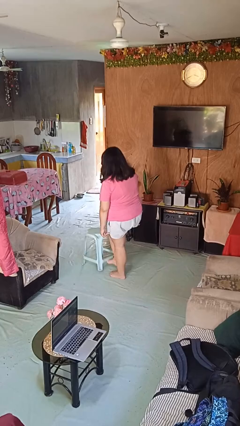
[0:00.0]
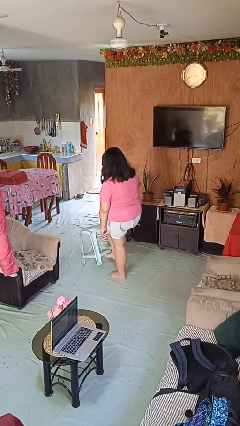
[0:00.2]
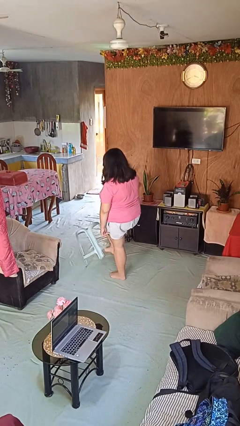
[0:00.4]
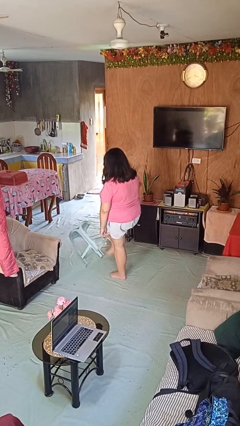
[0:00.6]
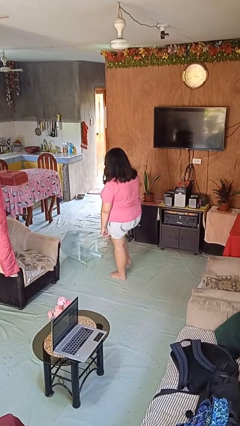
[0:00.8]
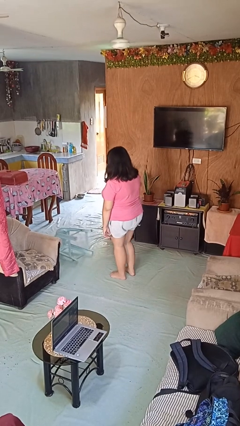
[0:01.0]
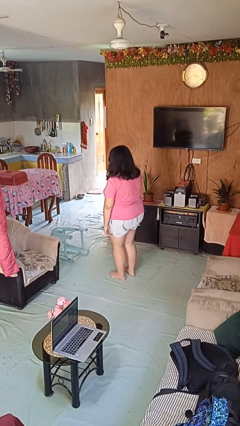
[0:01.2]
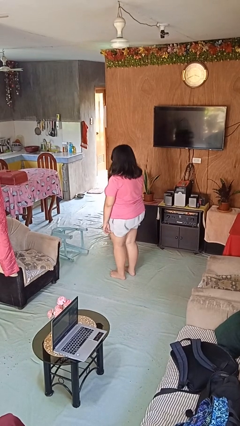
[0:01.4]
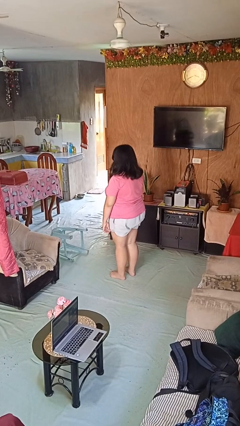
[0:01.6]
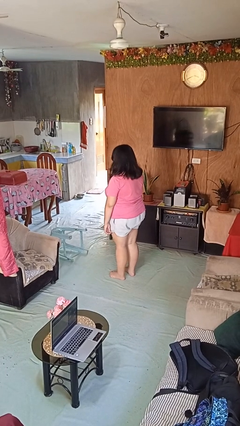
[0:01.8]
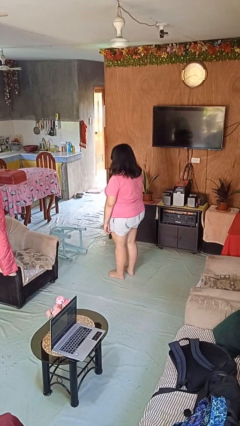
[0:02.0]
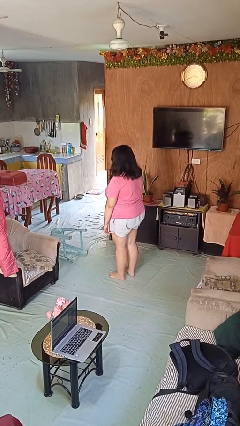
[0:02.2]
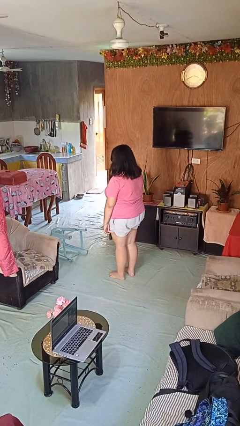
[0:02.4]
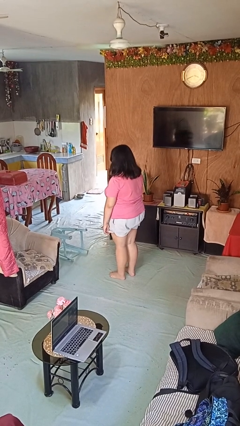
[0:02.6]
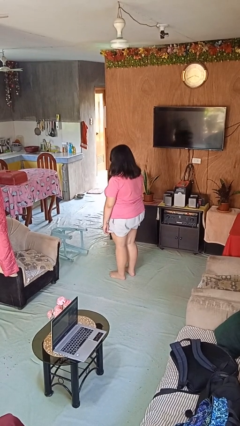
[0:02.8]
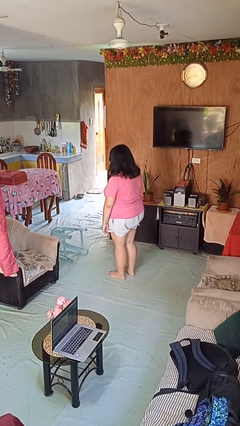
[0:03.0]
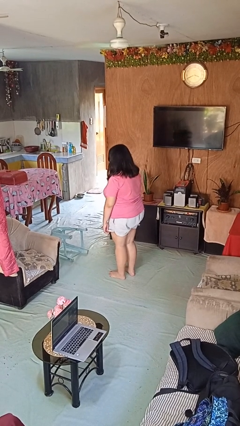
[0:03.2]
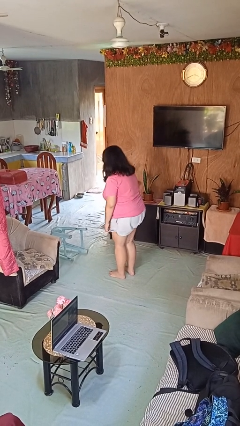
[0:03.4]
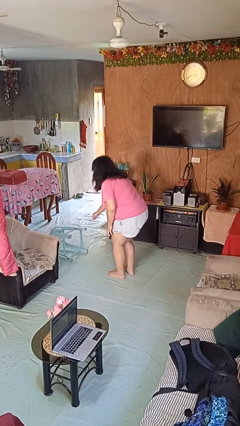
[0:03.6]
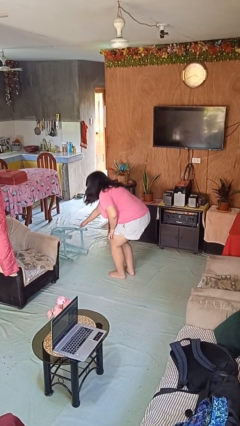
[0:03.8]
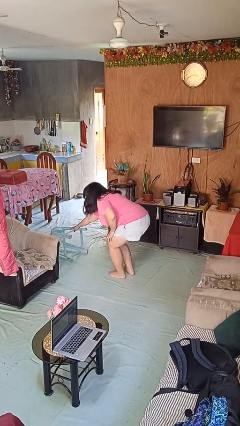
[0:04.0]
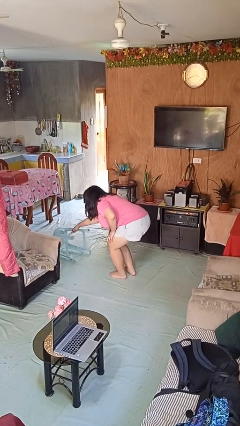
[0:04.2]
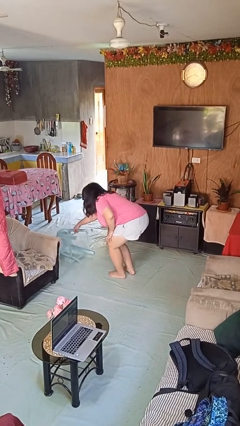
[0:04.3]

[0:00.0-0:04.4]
person knocks over furniture

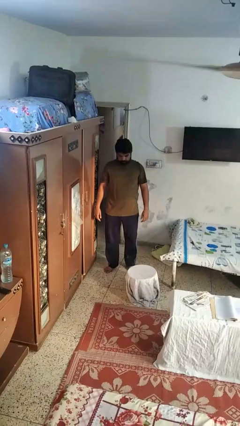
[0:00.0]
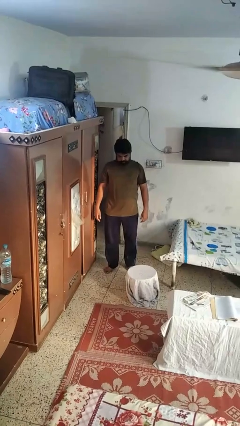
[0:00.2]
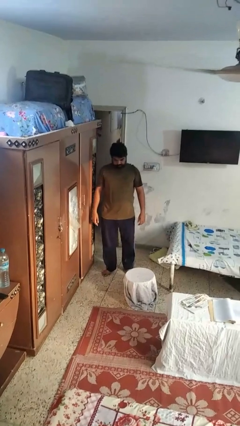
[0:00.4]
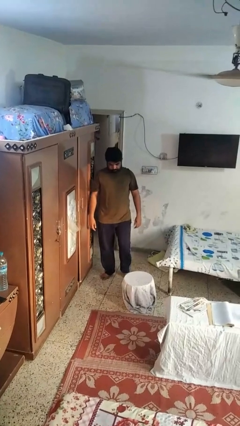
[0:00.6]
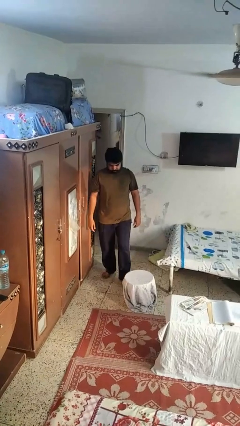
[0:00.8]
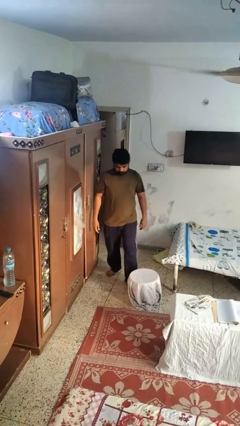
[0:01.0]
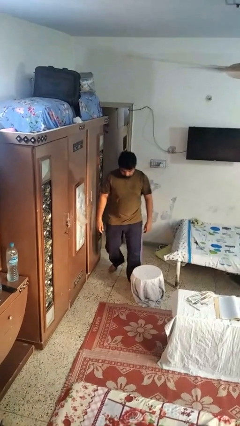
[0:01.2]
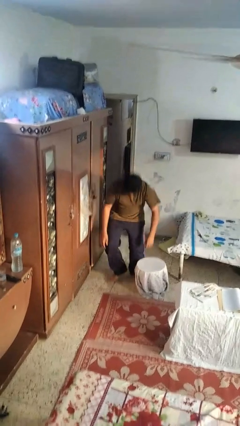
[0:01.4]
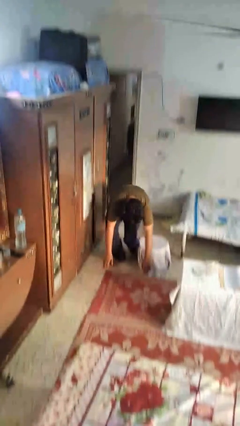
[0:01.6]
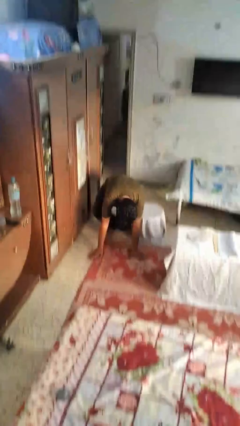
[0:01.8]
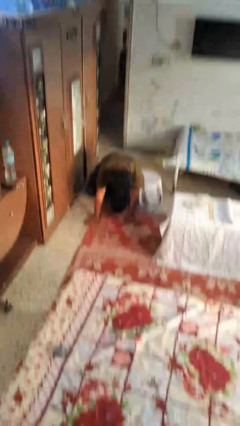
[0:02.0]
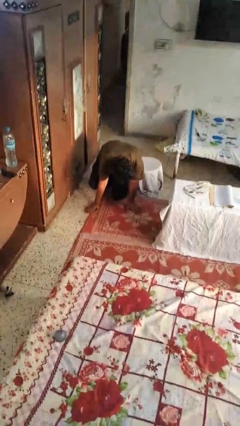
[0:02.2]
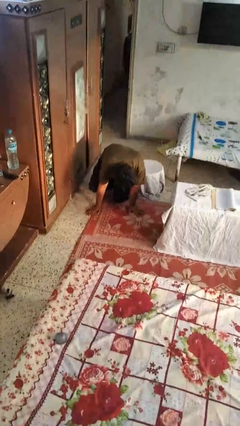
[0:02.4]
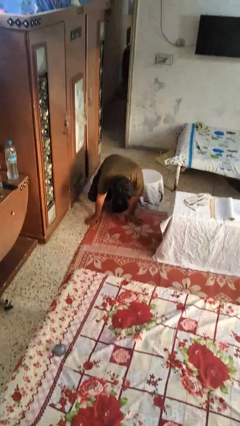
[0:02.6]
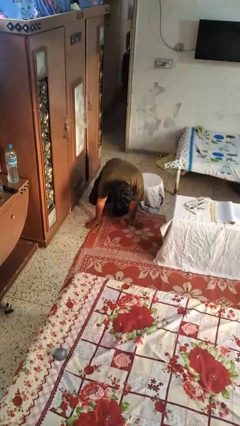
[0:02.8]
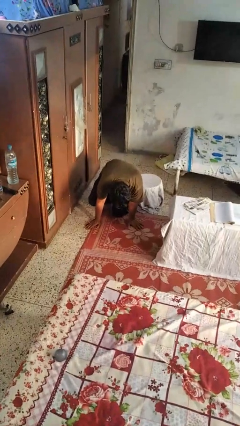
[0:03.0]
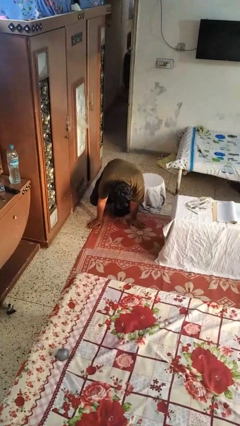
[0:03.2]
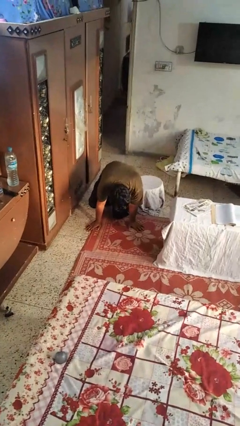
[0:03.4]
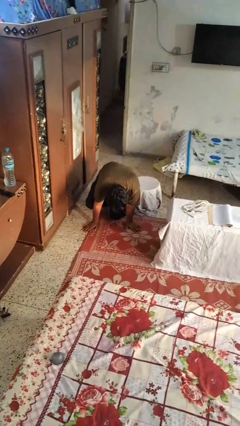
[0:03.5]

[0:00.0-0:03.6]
person trips on object on floor

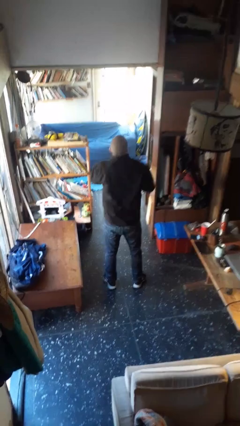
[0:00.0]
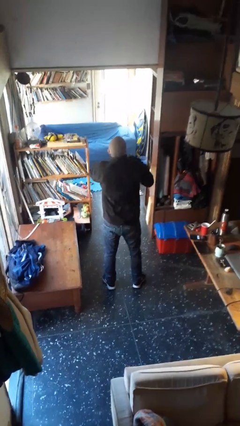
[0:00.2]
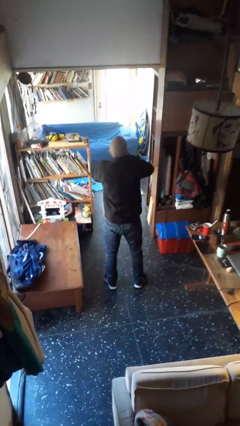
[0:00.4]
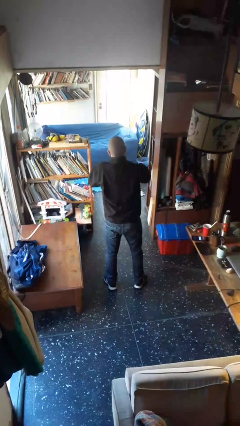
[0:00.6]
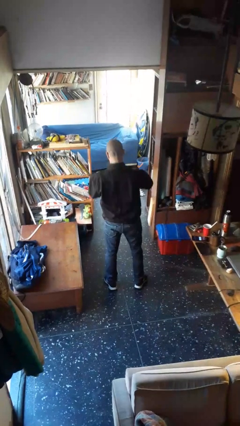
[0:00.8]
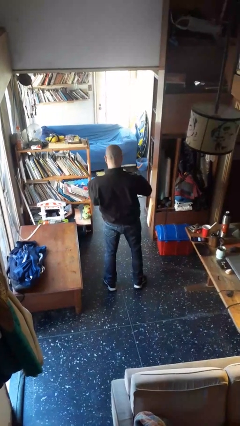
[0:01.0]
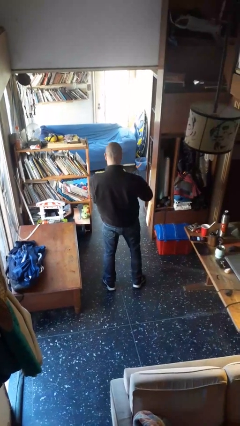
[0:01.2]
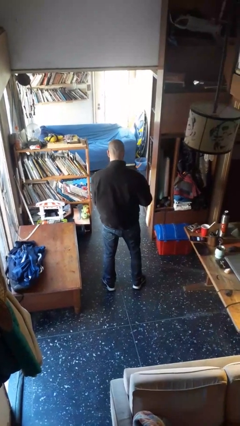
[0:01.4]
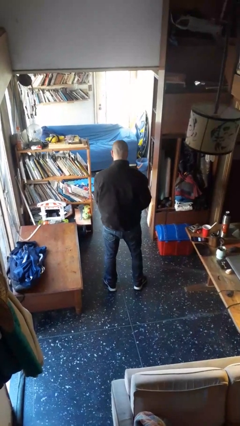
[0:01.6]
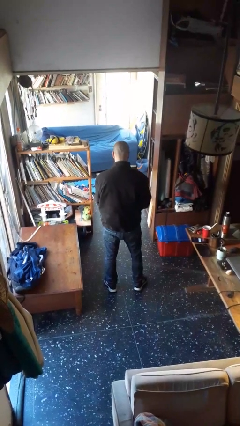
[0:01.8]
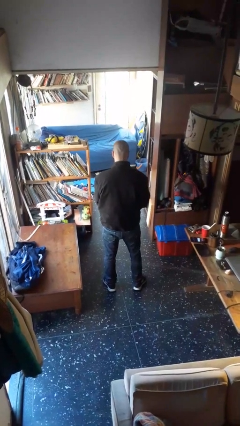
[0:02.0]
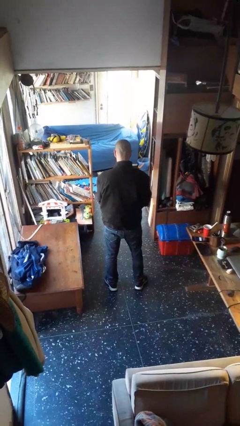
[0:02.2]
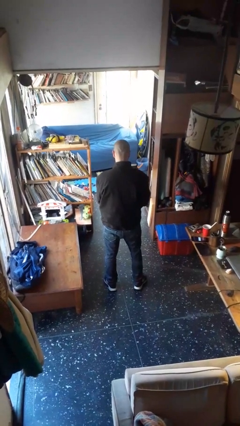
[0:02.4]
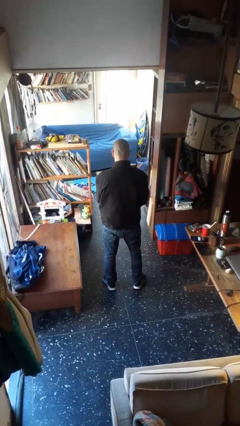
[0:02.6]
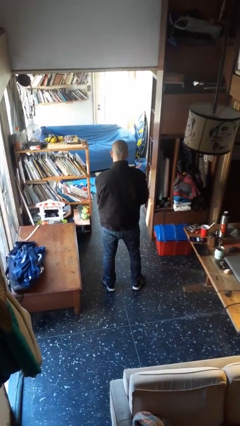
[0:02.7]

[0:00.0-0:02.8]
person unzips jacket

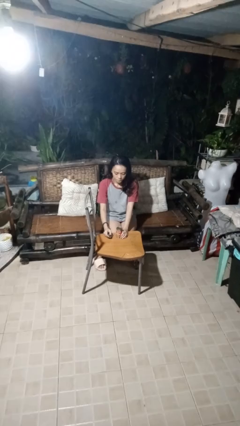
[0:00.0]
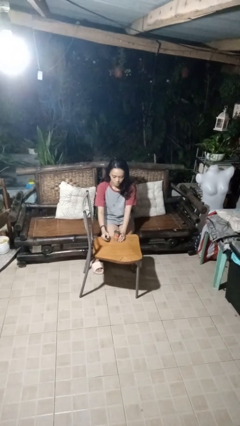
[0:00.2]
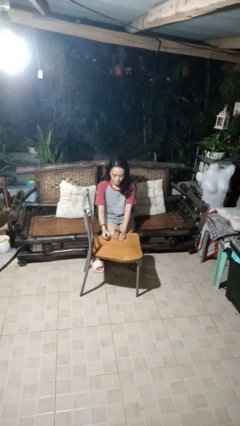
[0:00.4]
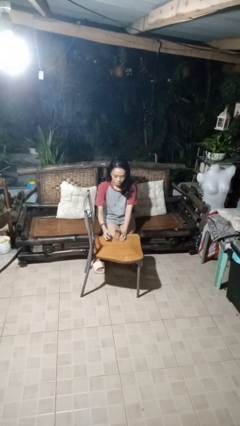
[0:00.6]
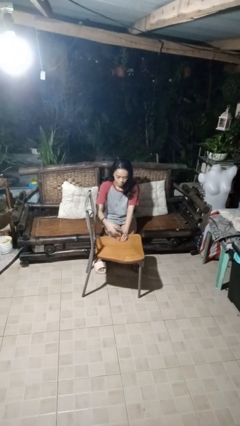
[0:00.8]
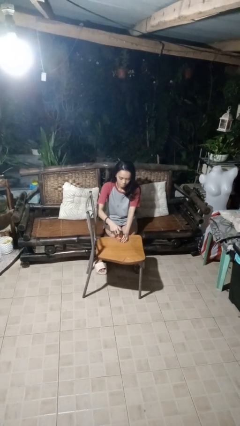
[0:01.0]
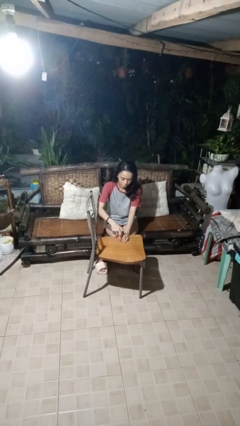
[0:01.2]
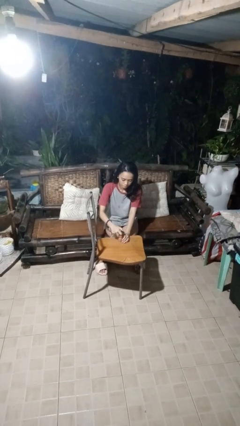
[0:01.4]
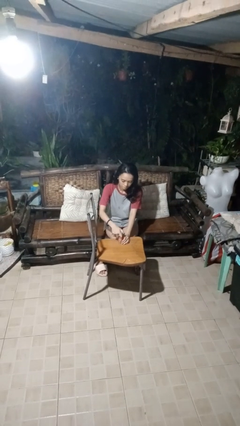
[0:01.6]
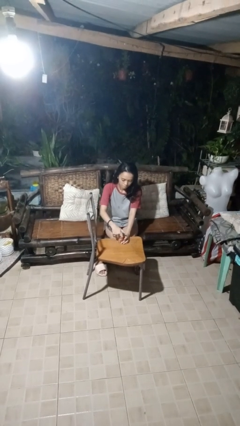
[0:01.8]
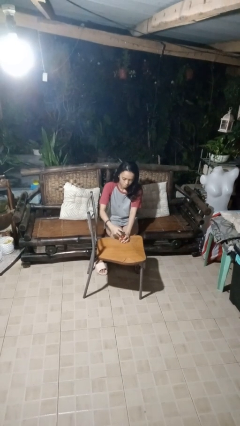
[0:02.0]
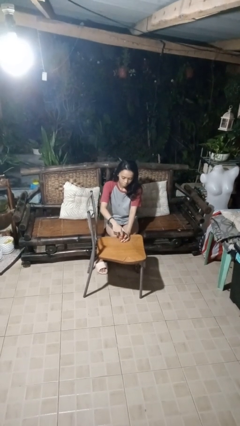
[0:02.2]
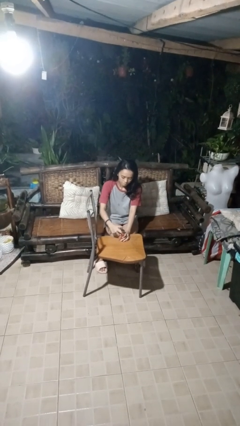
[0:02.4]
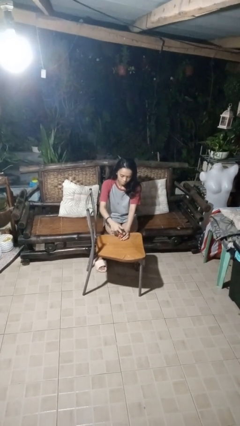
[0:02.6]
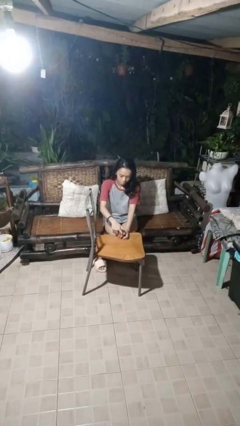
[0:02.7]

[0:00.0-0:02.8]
person opens can with can opener

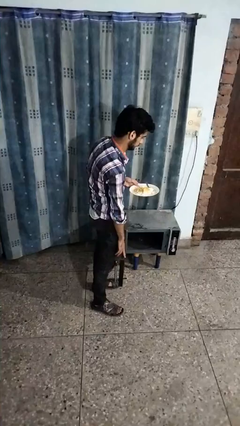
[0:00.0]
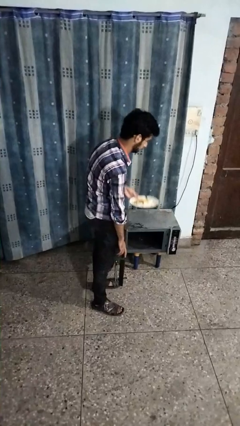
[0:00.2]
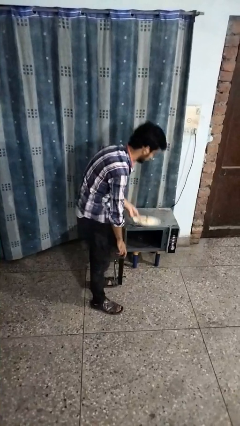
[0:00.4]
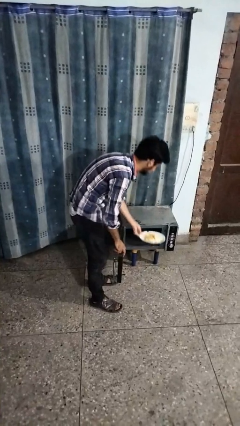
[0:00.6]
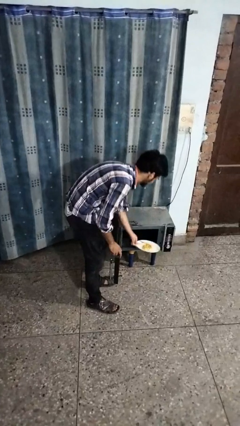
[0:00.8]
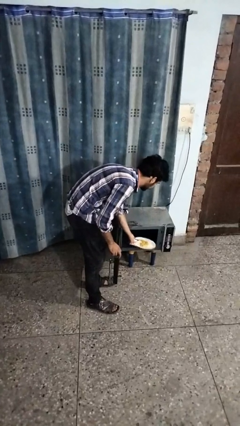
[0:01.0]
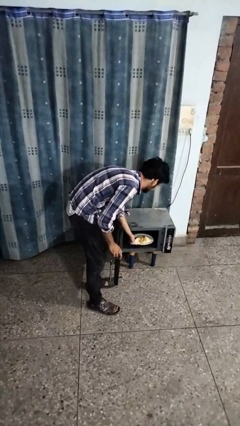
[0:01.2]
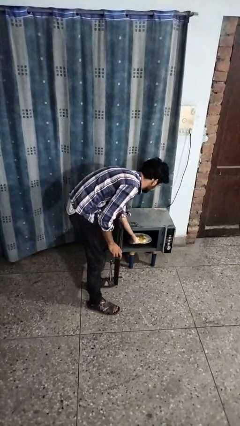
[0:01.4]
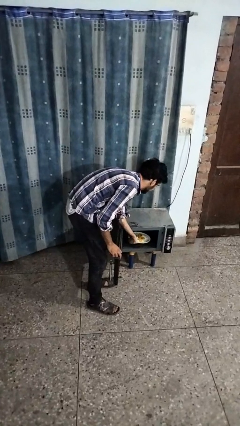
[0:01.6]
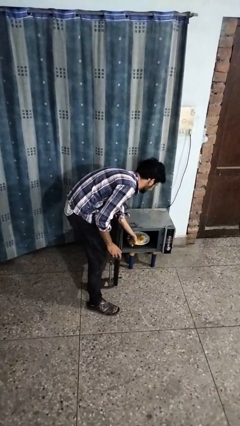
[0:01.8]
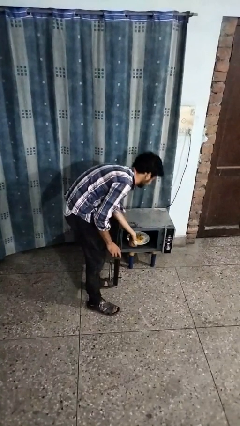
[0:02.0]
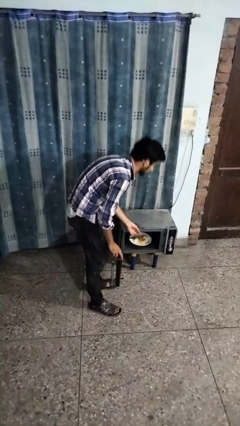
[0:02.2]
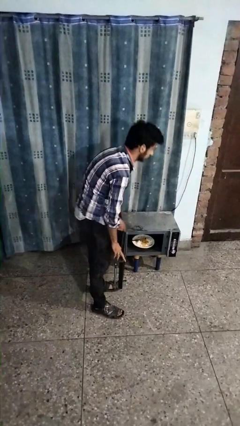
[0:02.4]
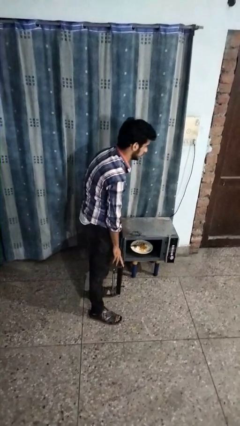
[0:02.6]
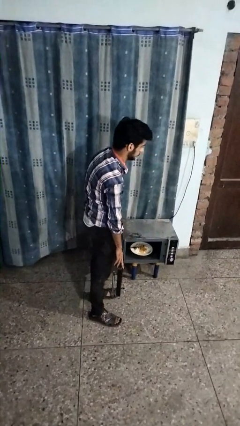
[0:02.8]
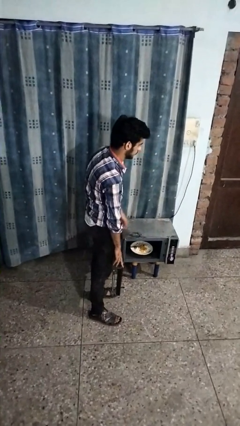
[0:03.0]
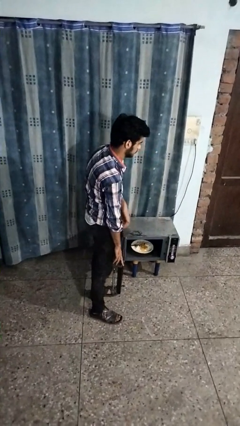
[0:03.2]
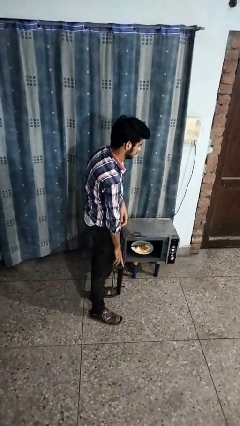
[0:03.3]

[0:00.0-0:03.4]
person puts object into oven

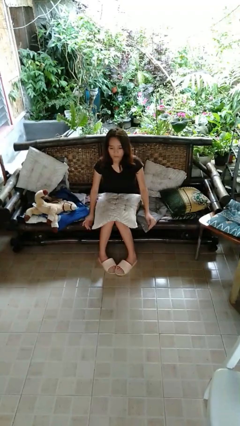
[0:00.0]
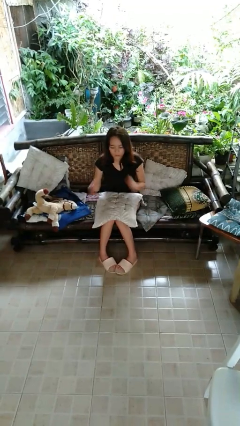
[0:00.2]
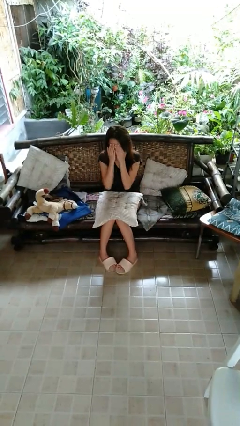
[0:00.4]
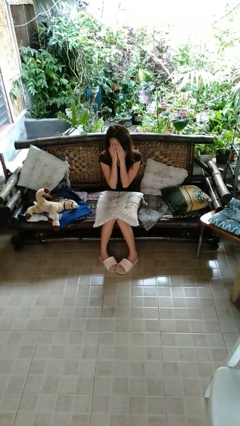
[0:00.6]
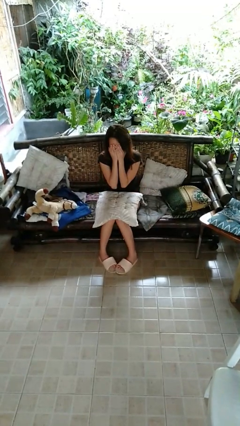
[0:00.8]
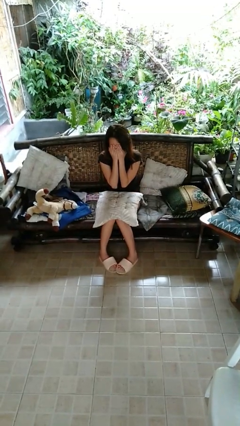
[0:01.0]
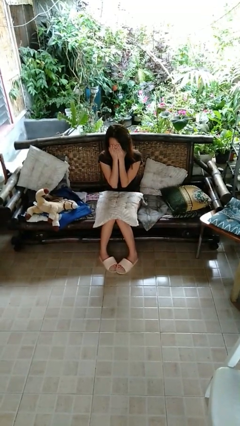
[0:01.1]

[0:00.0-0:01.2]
person covers face with hands
